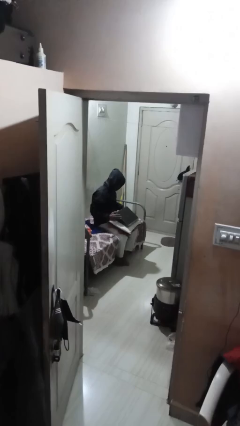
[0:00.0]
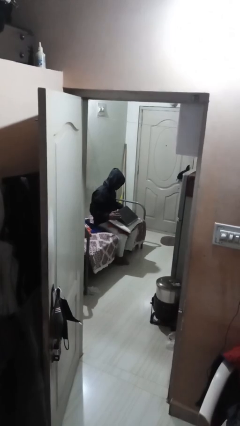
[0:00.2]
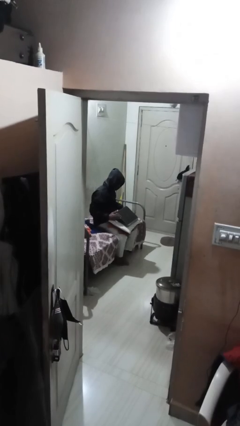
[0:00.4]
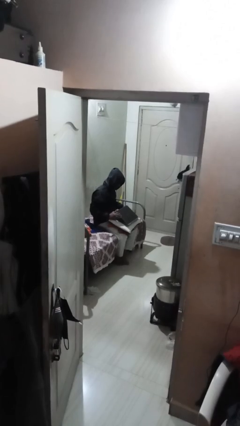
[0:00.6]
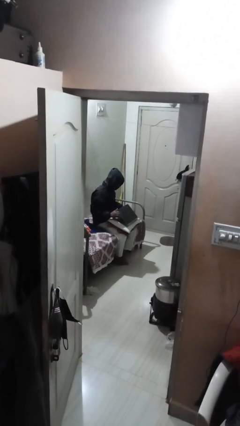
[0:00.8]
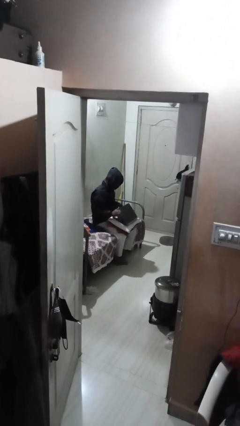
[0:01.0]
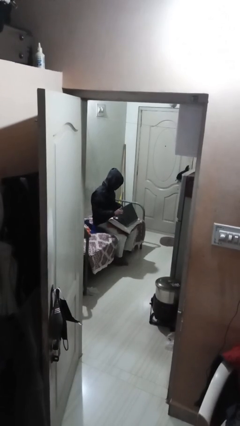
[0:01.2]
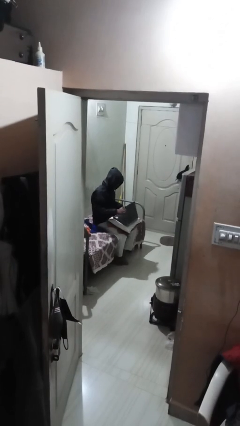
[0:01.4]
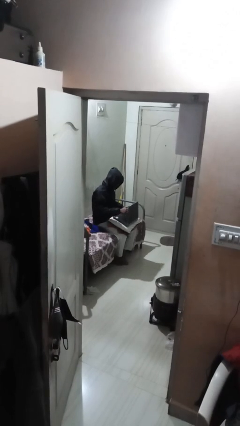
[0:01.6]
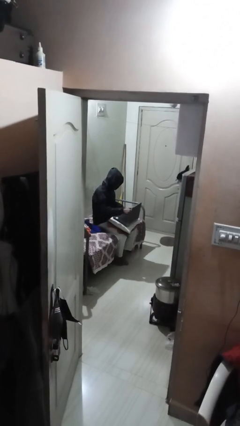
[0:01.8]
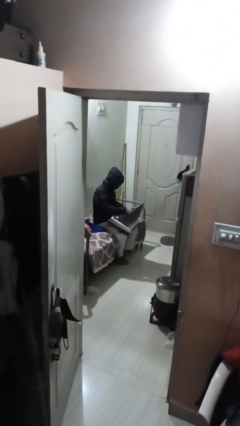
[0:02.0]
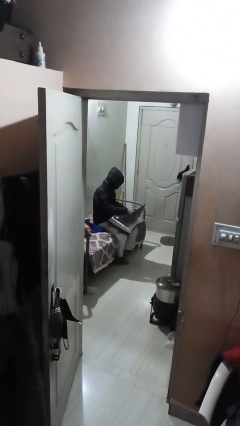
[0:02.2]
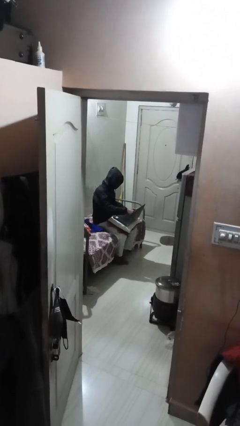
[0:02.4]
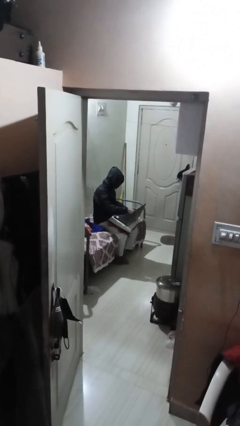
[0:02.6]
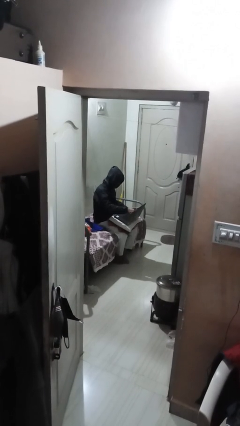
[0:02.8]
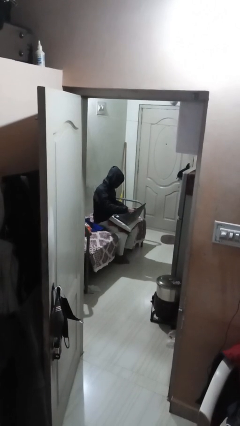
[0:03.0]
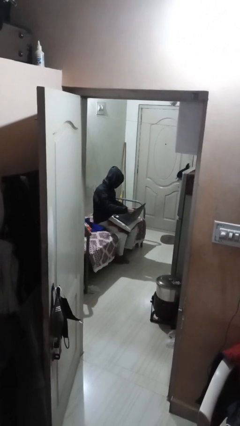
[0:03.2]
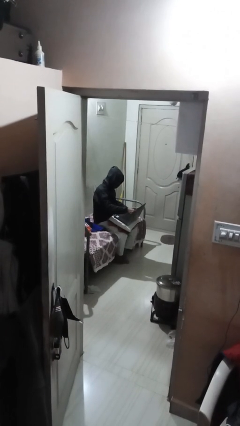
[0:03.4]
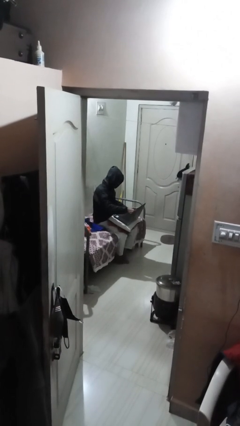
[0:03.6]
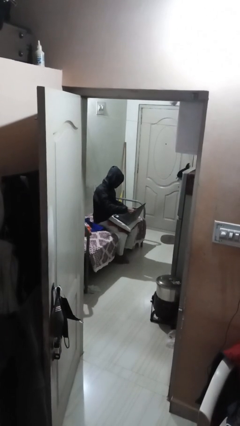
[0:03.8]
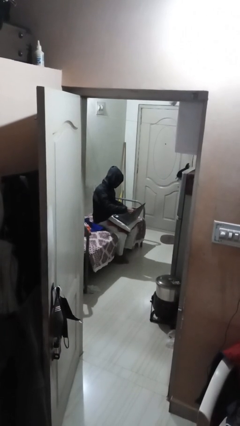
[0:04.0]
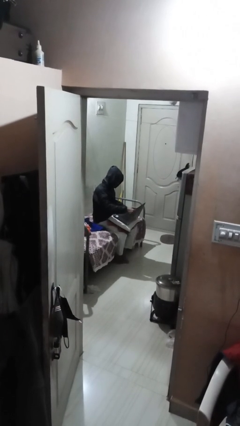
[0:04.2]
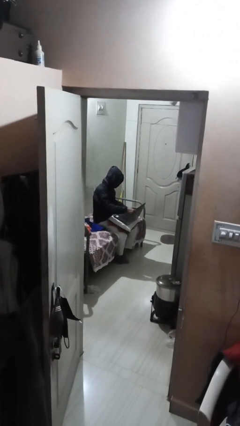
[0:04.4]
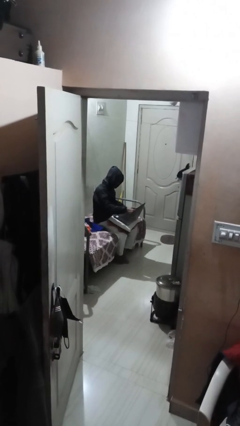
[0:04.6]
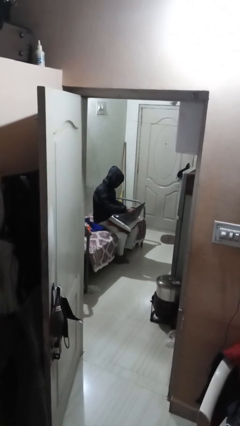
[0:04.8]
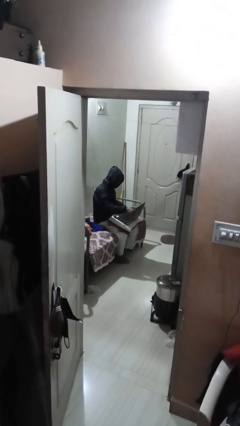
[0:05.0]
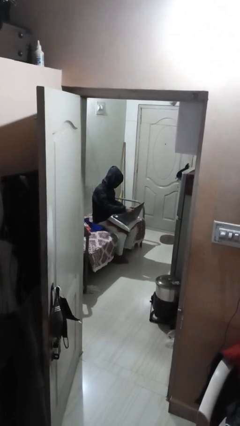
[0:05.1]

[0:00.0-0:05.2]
person interacts with laptop

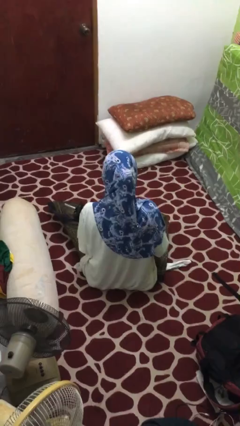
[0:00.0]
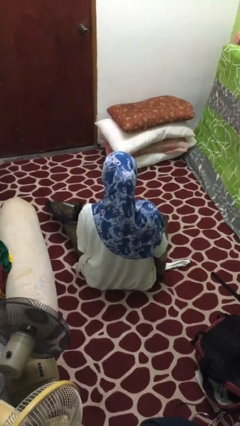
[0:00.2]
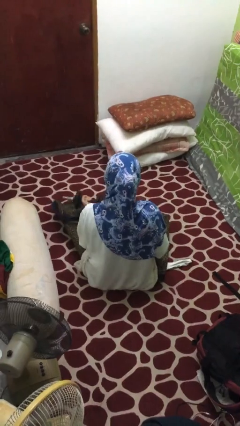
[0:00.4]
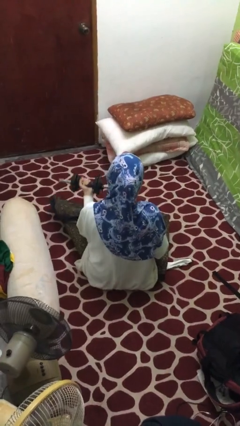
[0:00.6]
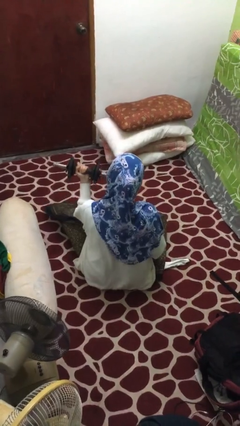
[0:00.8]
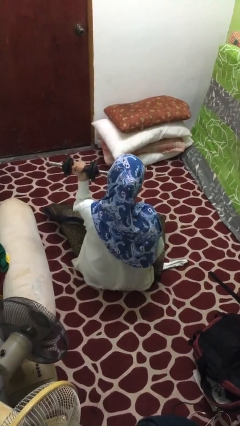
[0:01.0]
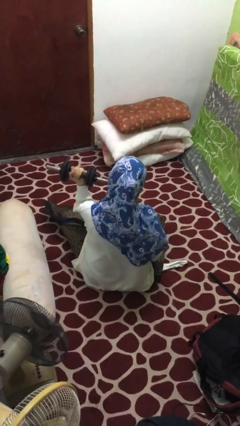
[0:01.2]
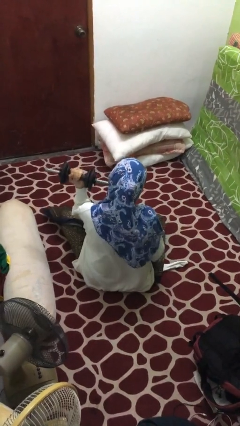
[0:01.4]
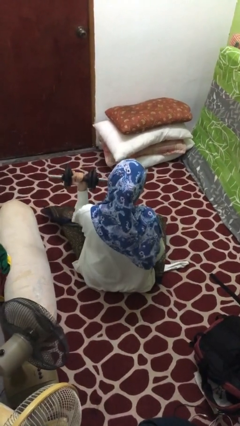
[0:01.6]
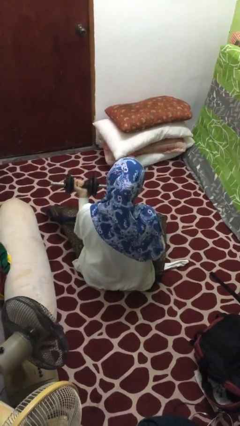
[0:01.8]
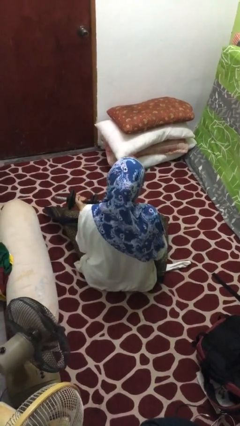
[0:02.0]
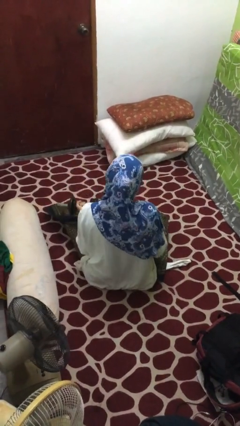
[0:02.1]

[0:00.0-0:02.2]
person lifts dumbbells

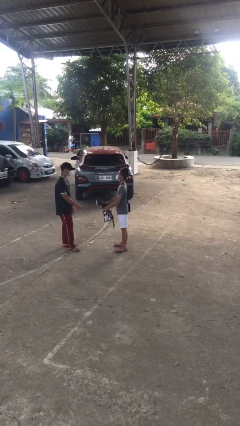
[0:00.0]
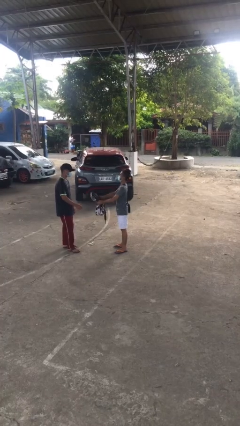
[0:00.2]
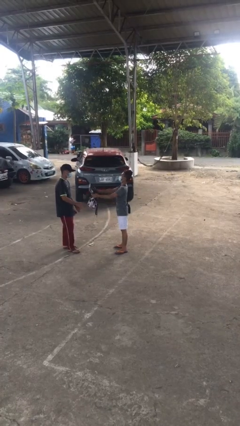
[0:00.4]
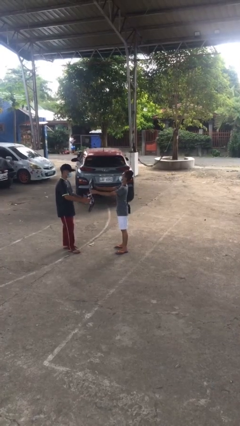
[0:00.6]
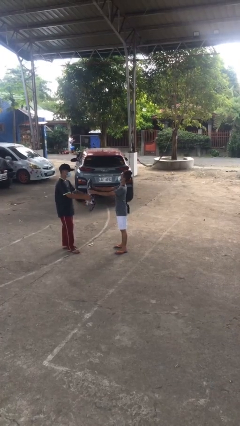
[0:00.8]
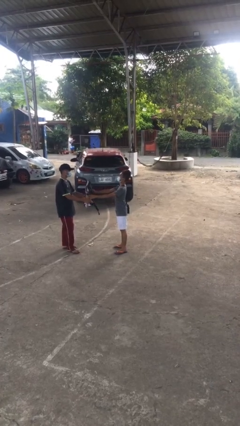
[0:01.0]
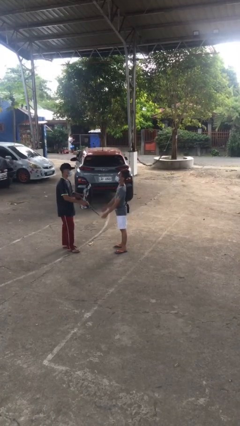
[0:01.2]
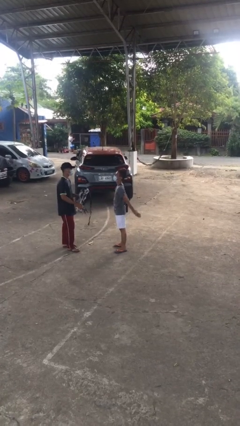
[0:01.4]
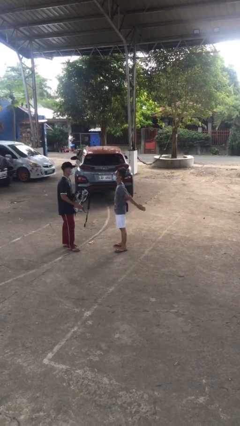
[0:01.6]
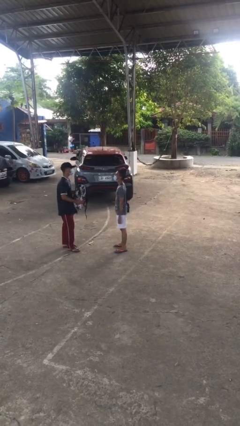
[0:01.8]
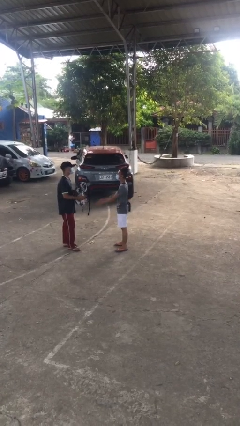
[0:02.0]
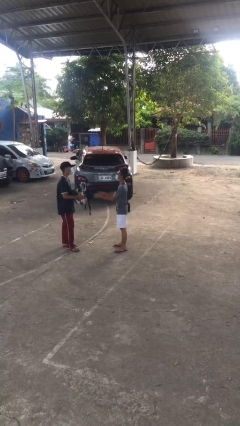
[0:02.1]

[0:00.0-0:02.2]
person transfers object to person

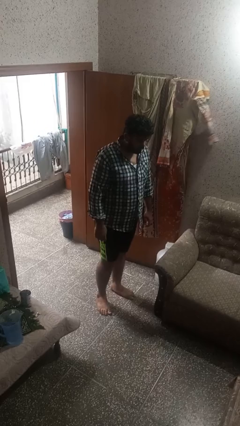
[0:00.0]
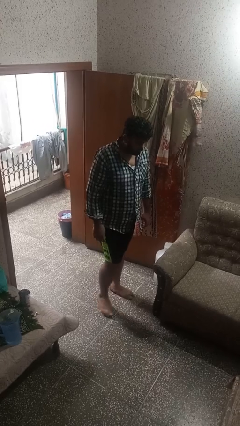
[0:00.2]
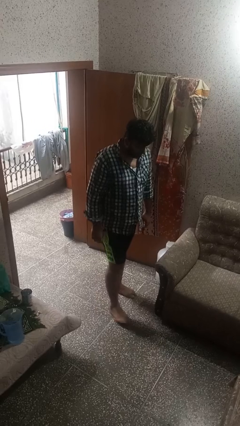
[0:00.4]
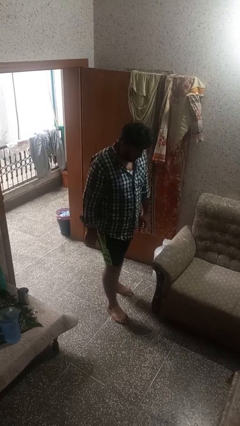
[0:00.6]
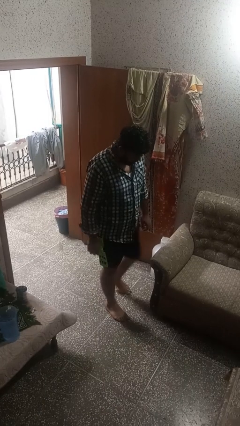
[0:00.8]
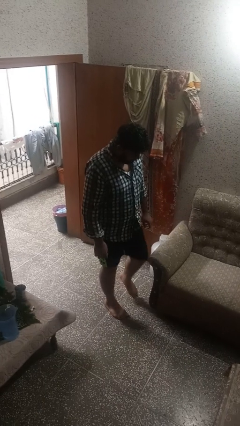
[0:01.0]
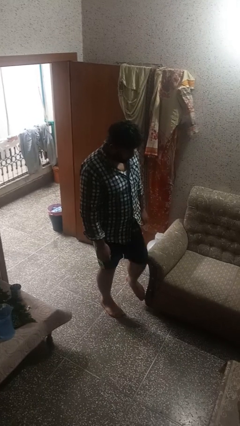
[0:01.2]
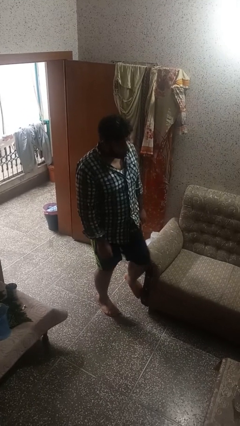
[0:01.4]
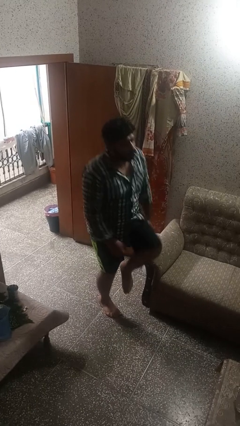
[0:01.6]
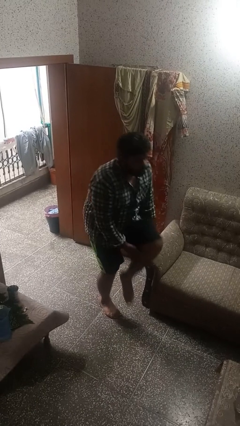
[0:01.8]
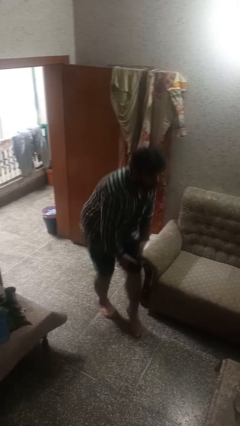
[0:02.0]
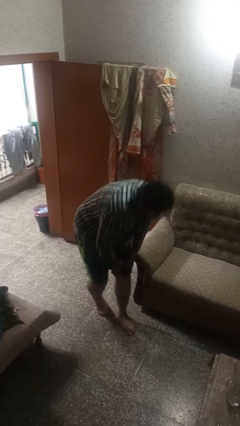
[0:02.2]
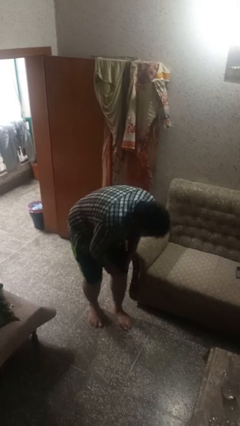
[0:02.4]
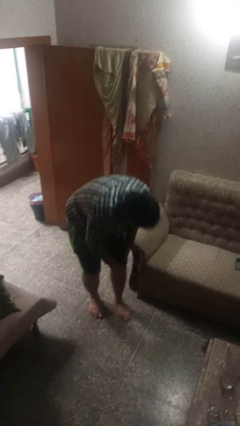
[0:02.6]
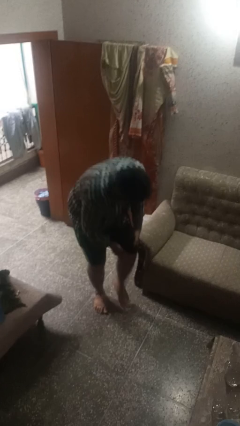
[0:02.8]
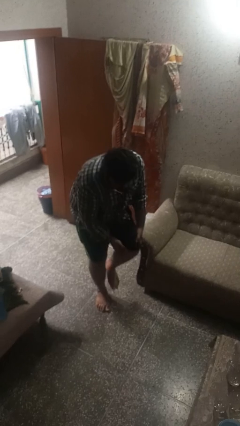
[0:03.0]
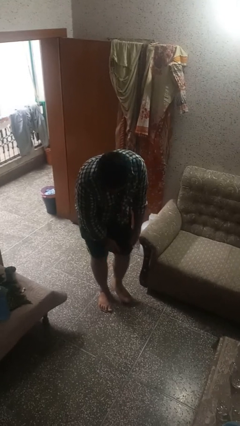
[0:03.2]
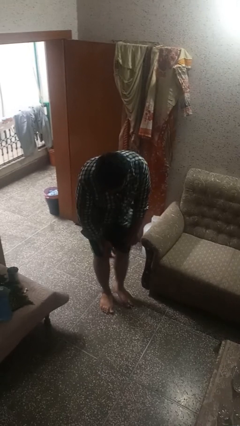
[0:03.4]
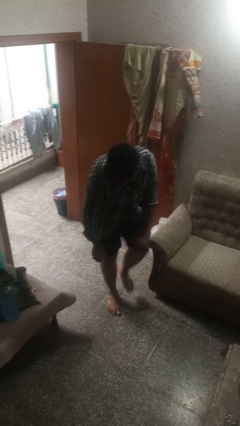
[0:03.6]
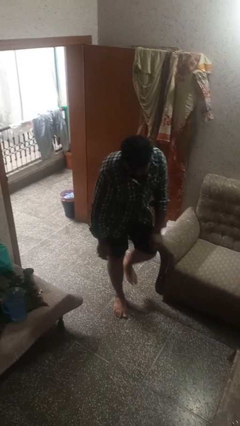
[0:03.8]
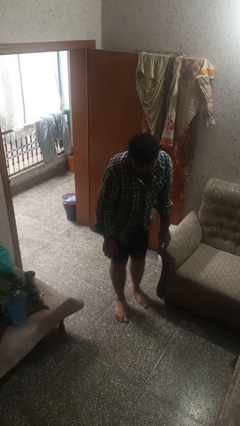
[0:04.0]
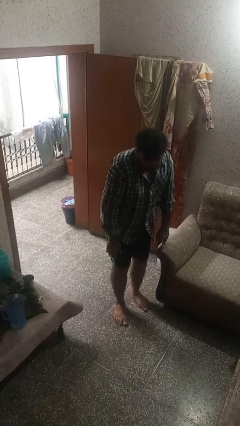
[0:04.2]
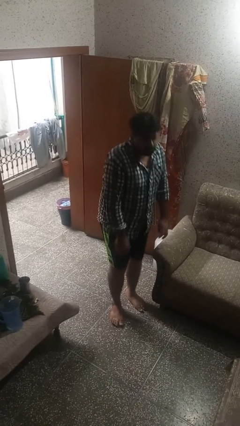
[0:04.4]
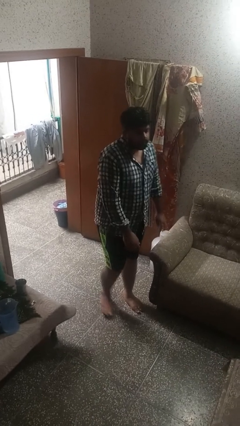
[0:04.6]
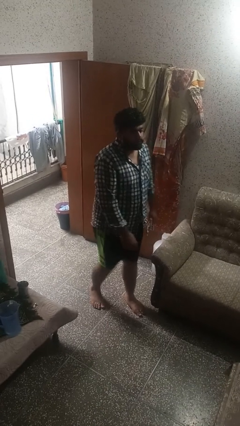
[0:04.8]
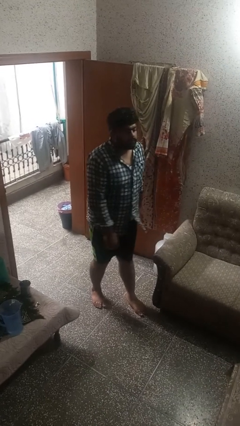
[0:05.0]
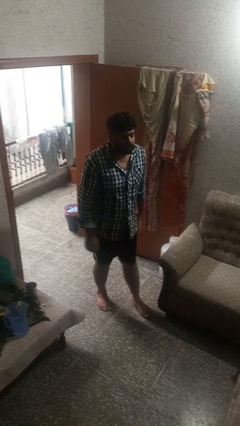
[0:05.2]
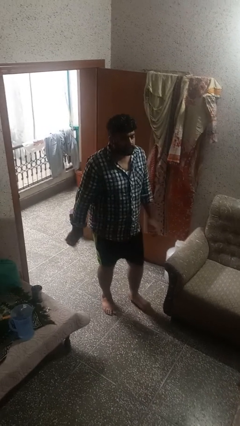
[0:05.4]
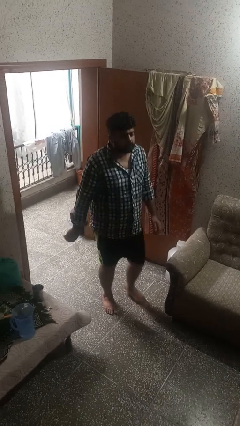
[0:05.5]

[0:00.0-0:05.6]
person stubs toe

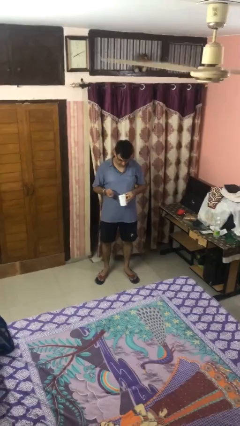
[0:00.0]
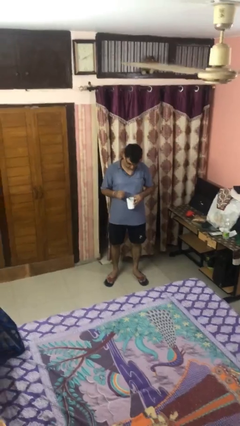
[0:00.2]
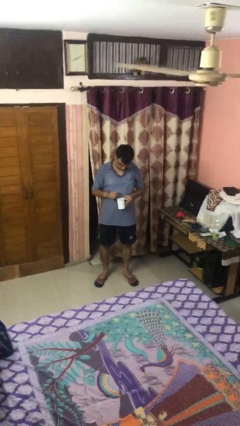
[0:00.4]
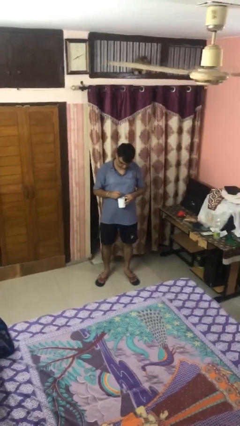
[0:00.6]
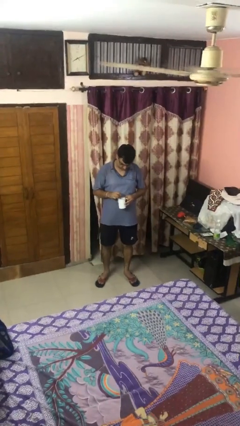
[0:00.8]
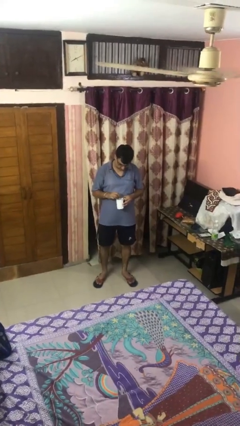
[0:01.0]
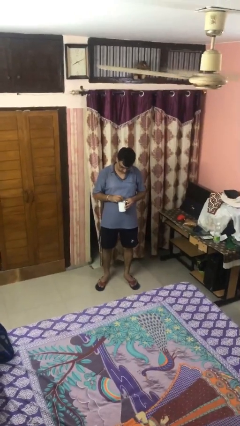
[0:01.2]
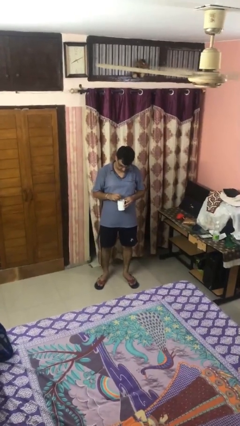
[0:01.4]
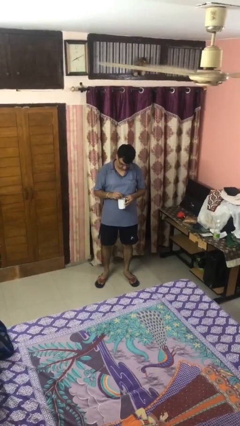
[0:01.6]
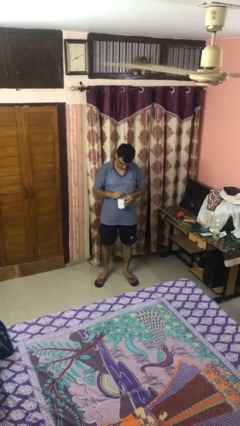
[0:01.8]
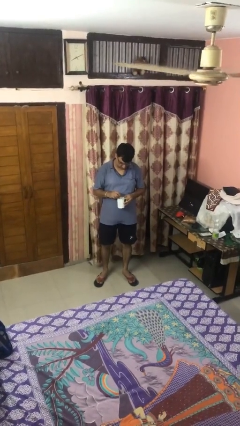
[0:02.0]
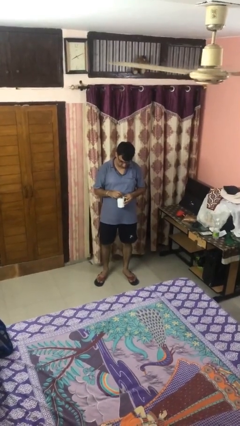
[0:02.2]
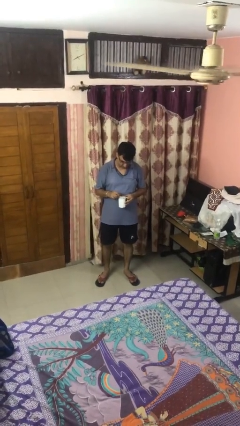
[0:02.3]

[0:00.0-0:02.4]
person stirs mug
